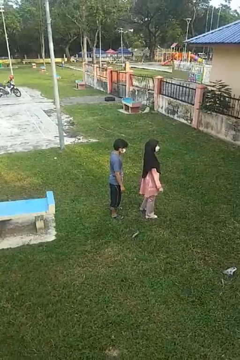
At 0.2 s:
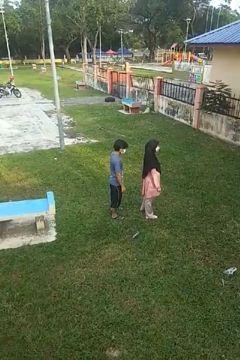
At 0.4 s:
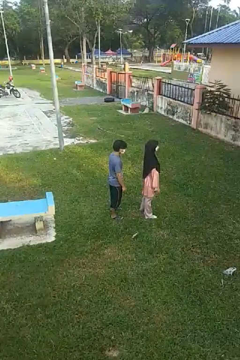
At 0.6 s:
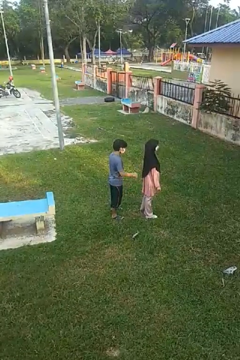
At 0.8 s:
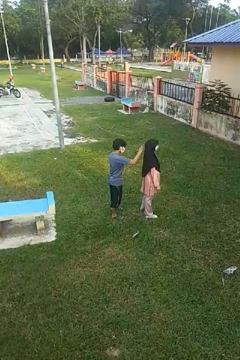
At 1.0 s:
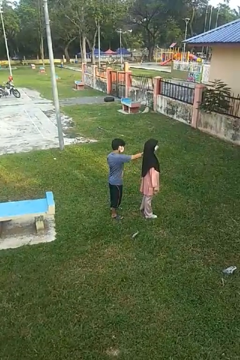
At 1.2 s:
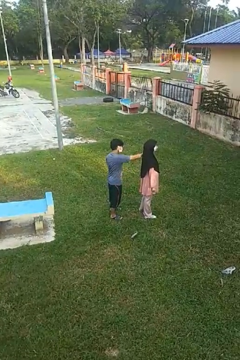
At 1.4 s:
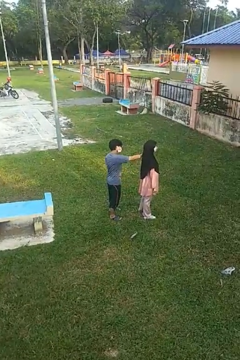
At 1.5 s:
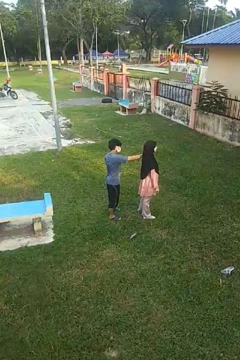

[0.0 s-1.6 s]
person grabs person by shoulder

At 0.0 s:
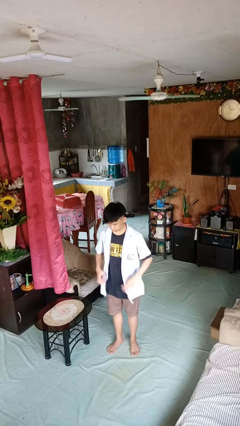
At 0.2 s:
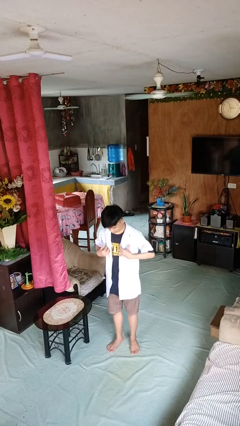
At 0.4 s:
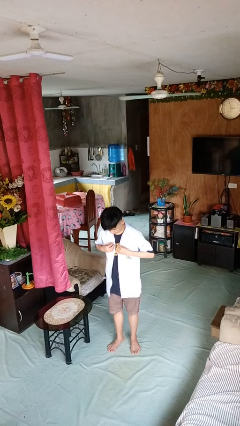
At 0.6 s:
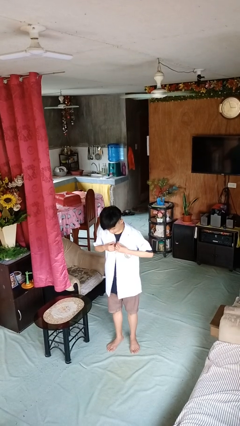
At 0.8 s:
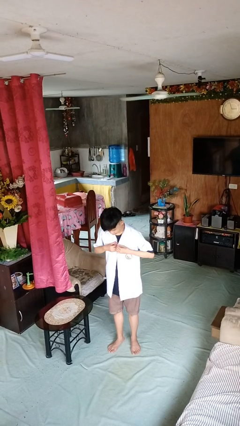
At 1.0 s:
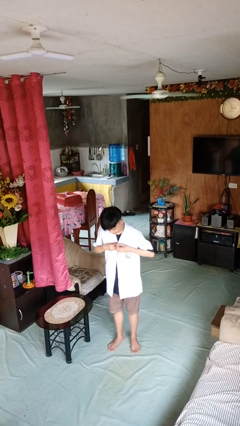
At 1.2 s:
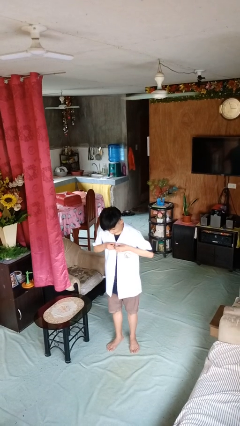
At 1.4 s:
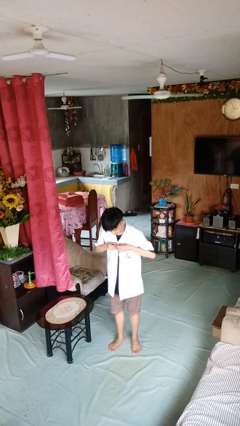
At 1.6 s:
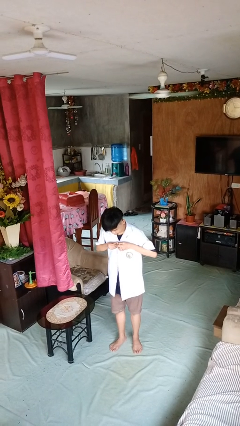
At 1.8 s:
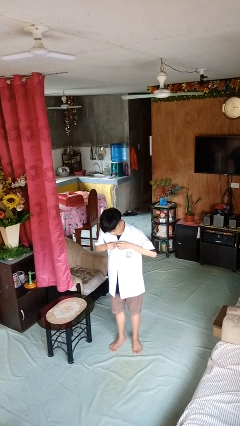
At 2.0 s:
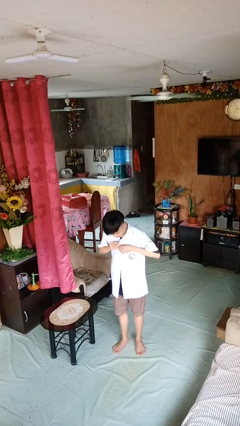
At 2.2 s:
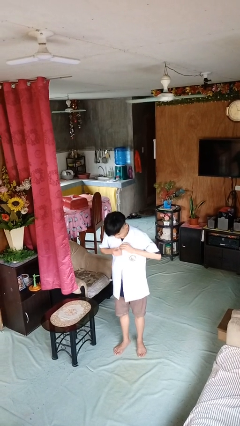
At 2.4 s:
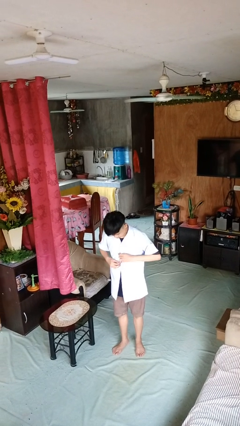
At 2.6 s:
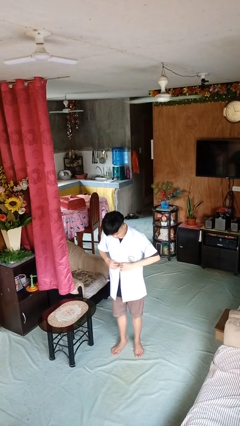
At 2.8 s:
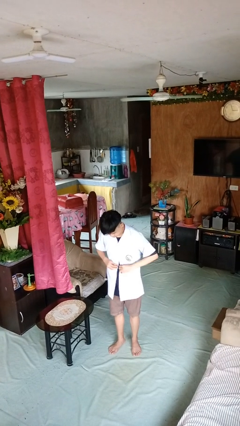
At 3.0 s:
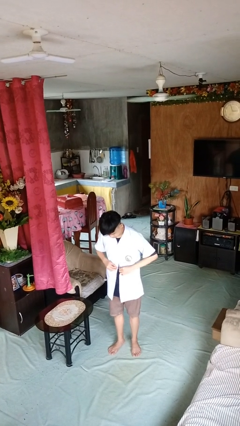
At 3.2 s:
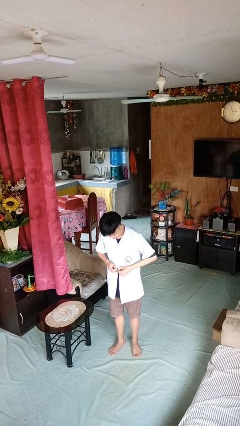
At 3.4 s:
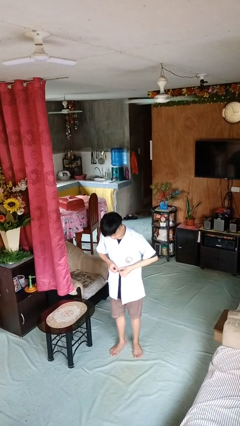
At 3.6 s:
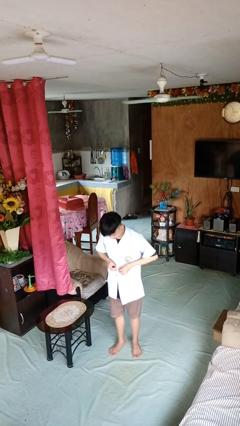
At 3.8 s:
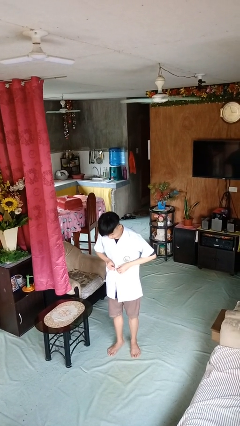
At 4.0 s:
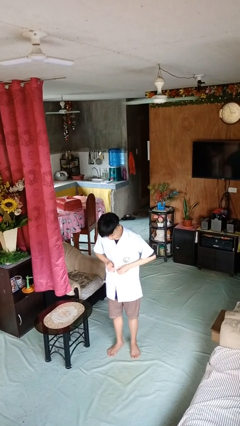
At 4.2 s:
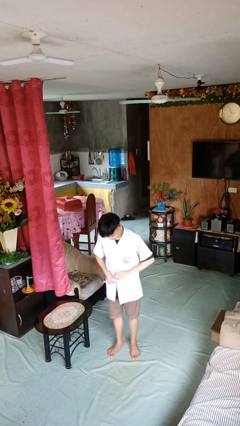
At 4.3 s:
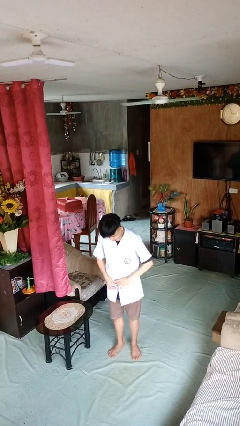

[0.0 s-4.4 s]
person buttons shirt

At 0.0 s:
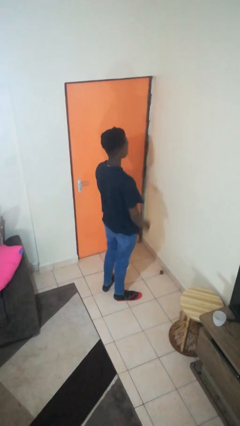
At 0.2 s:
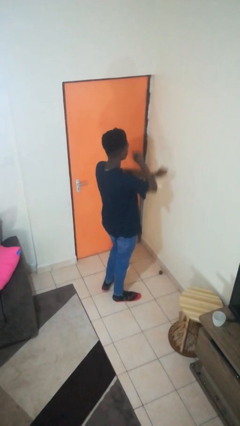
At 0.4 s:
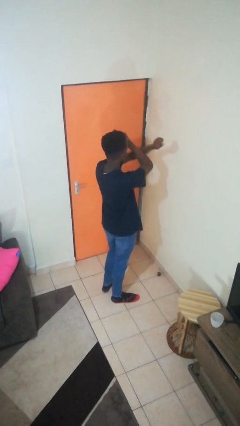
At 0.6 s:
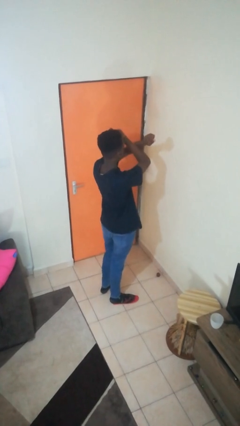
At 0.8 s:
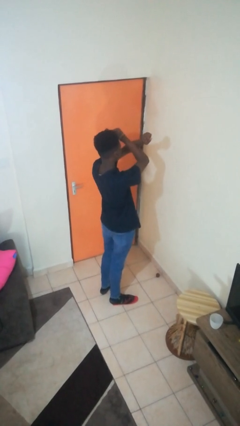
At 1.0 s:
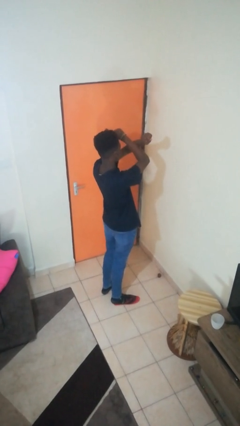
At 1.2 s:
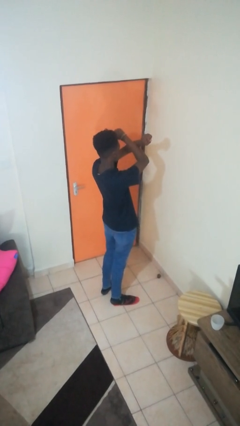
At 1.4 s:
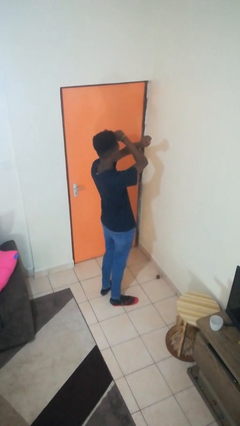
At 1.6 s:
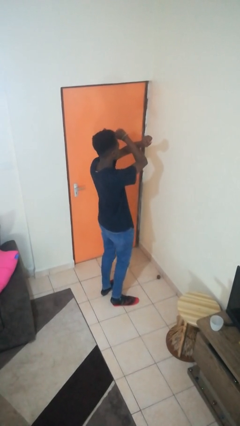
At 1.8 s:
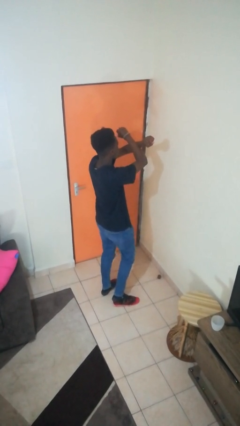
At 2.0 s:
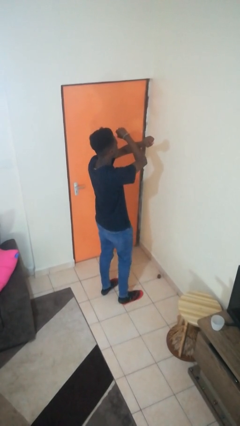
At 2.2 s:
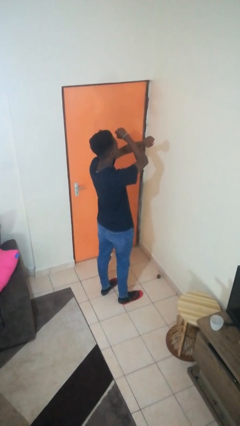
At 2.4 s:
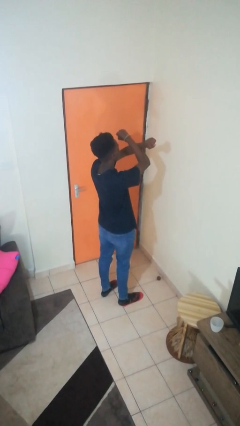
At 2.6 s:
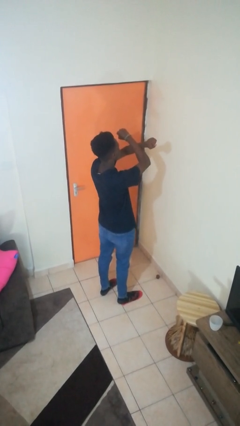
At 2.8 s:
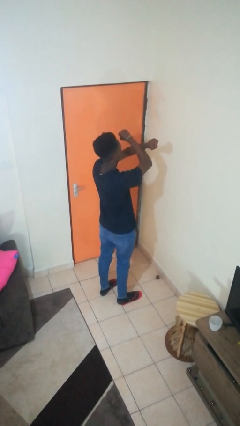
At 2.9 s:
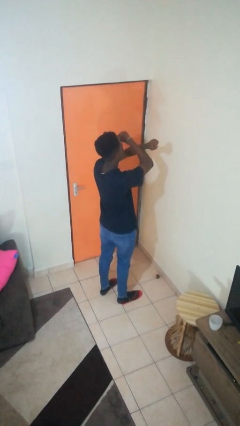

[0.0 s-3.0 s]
person gestures arms x

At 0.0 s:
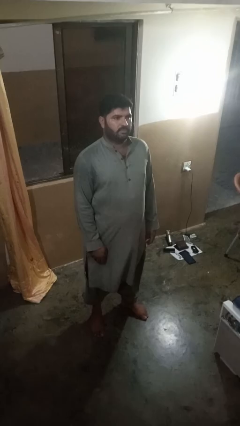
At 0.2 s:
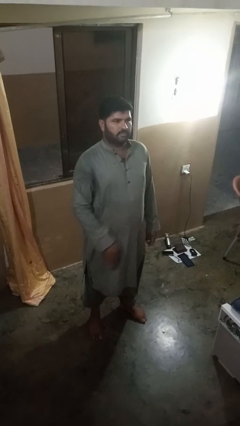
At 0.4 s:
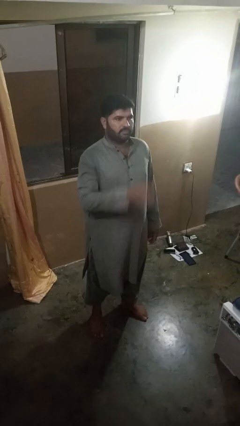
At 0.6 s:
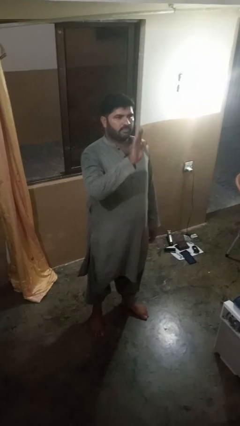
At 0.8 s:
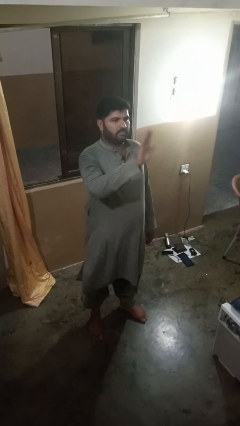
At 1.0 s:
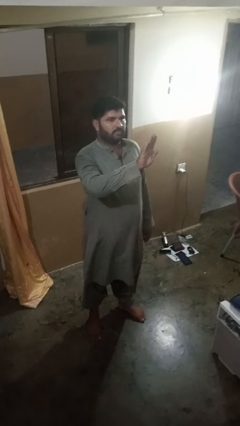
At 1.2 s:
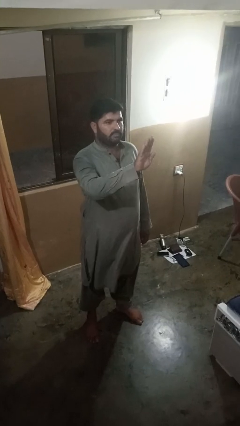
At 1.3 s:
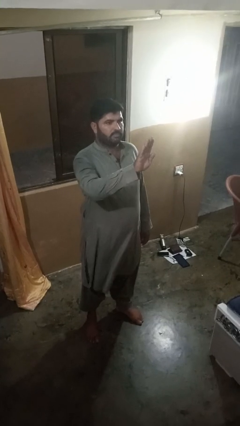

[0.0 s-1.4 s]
person gestures stop

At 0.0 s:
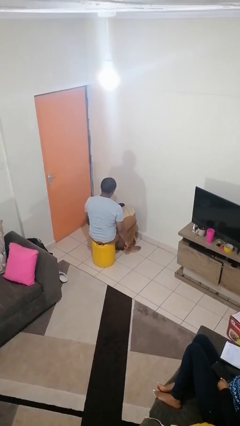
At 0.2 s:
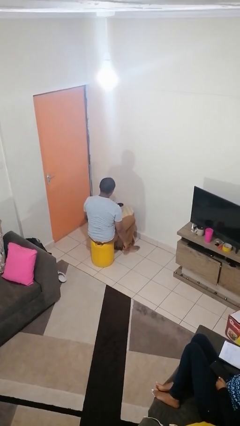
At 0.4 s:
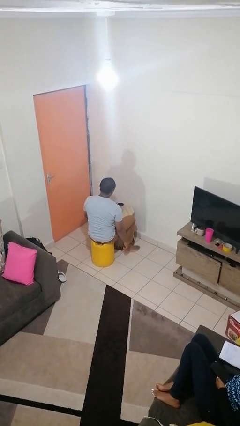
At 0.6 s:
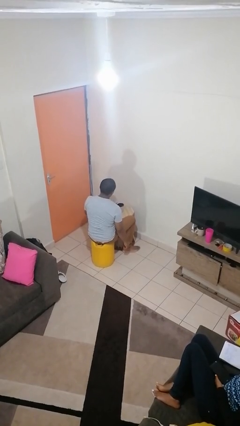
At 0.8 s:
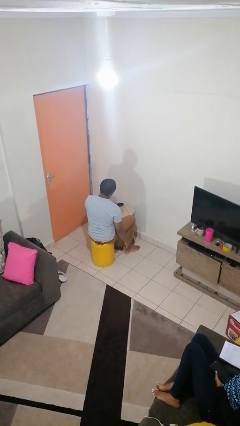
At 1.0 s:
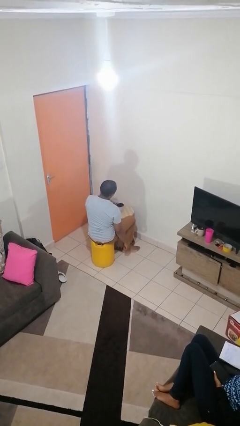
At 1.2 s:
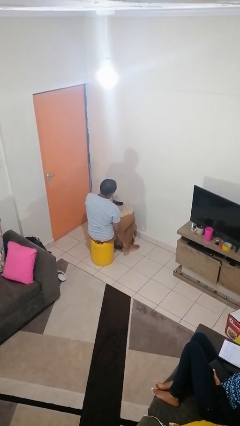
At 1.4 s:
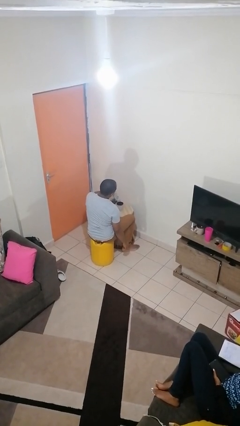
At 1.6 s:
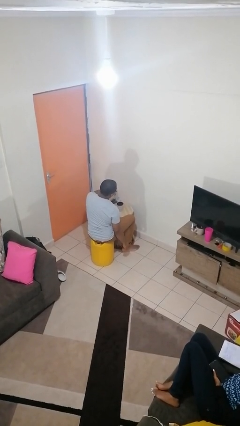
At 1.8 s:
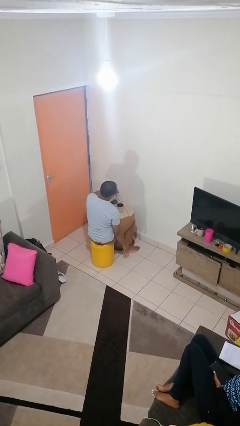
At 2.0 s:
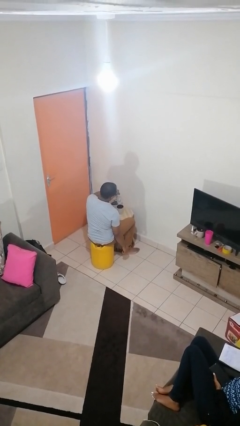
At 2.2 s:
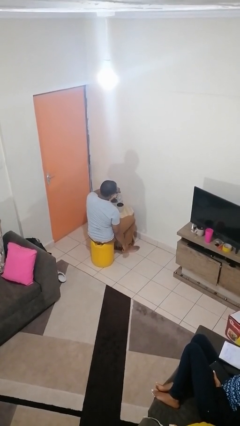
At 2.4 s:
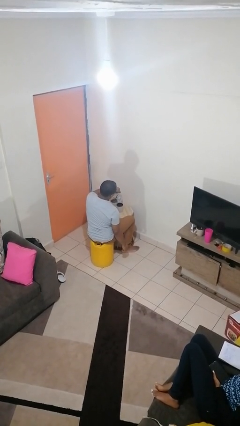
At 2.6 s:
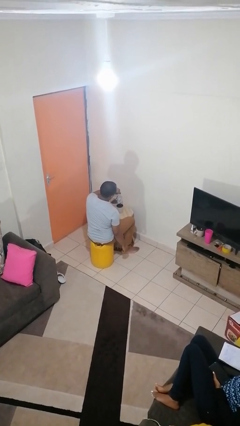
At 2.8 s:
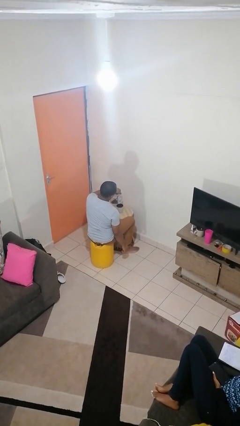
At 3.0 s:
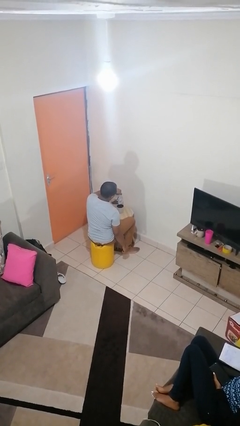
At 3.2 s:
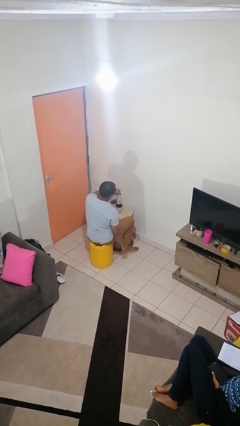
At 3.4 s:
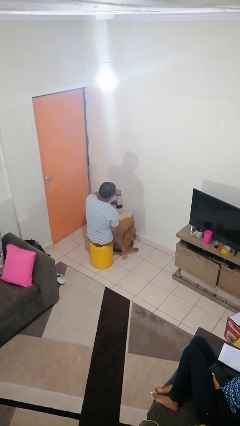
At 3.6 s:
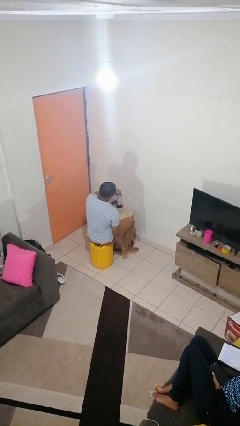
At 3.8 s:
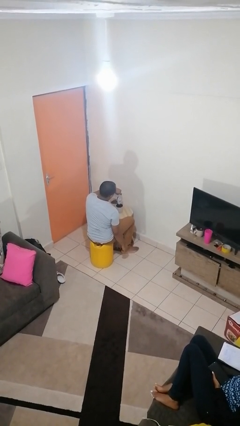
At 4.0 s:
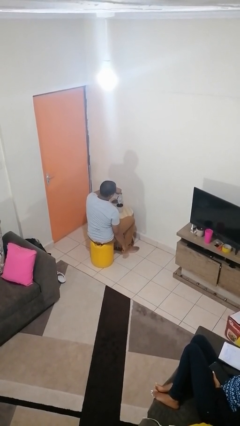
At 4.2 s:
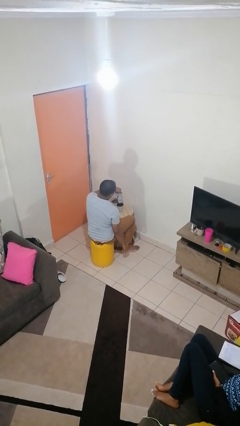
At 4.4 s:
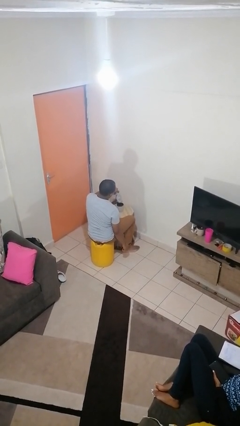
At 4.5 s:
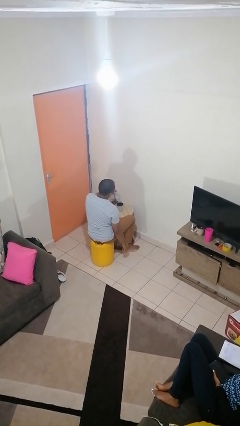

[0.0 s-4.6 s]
person pours coffee into mug

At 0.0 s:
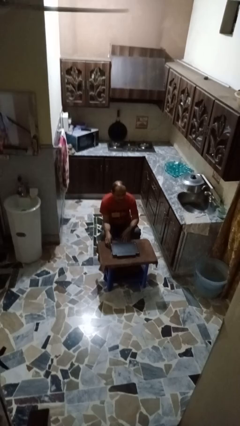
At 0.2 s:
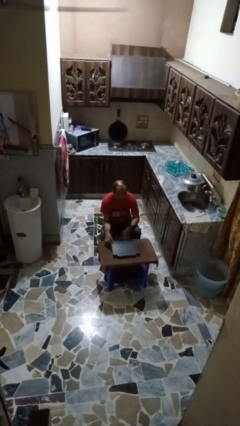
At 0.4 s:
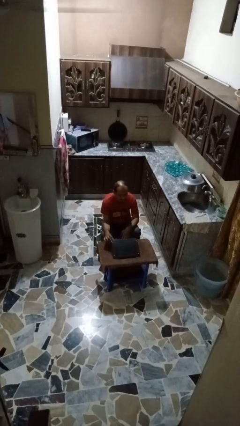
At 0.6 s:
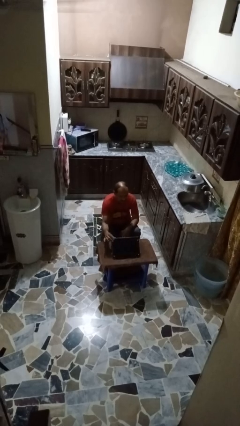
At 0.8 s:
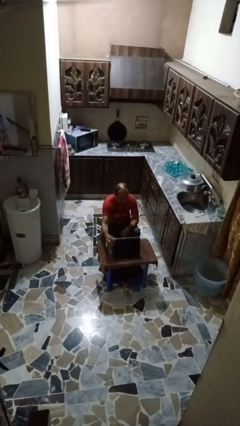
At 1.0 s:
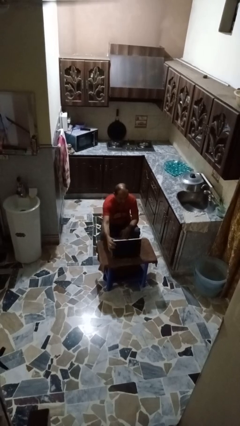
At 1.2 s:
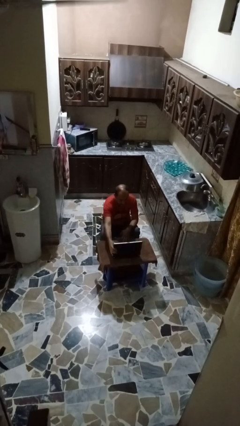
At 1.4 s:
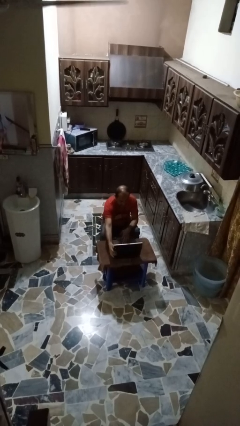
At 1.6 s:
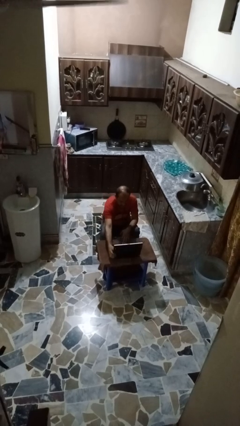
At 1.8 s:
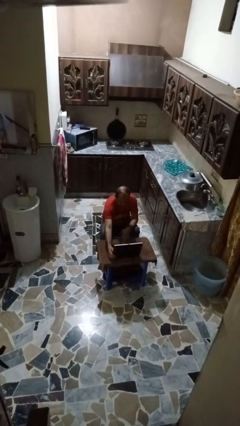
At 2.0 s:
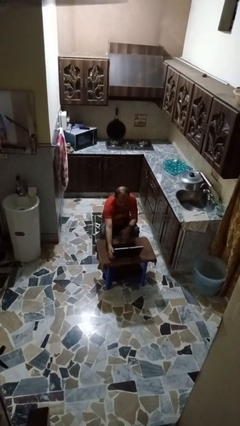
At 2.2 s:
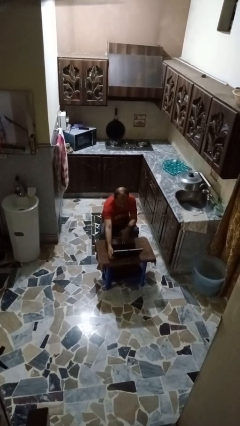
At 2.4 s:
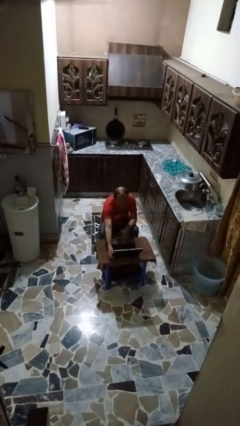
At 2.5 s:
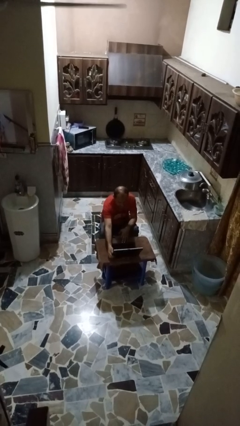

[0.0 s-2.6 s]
person opens laptop
